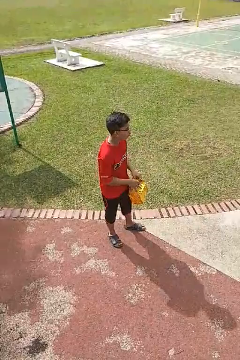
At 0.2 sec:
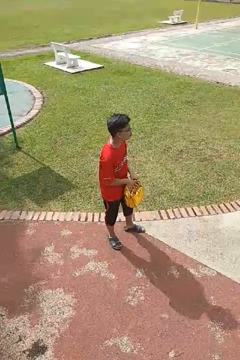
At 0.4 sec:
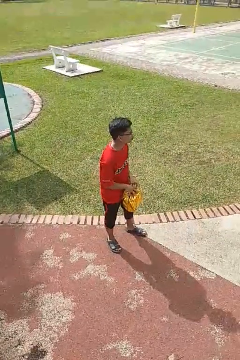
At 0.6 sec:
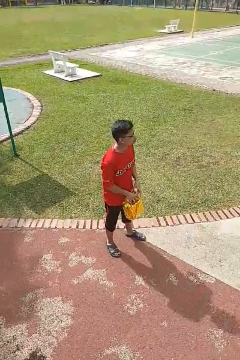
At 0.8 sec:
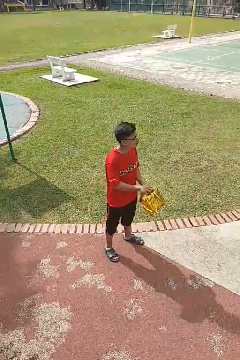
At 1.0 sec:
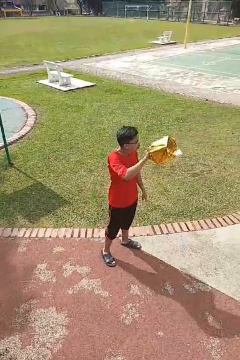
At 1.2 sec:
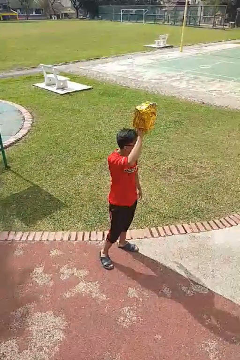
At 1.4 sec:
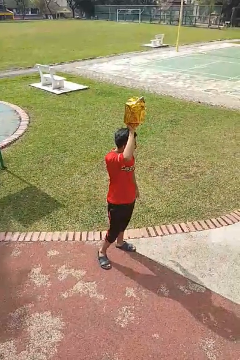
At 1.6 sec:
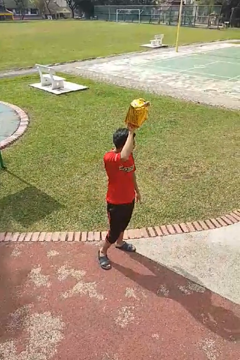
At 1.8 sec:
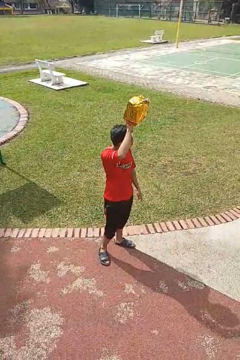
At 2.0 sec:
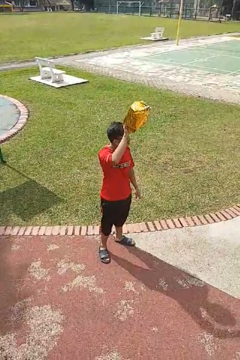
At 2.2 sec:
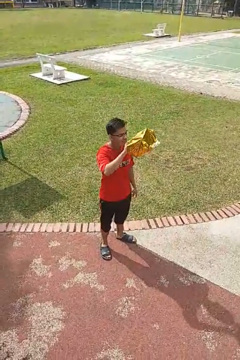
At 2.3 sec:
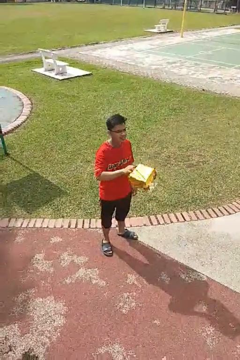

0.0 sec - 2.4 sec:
person holds object above head

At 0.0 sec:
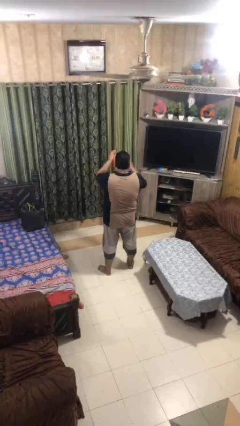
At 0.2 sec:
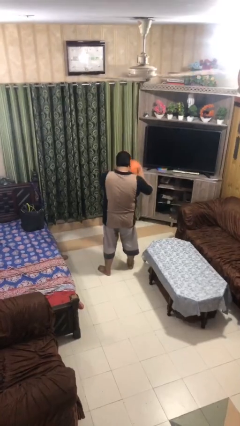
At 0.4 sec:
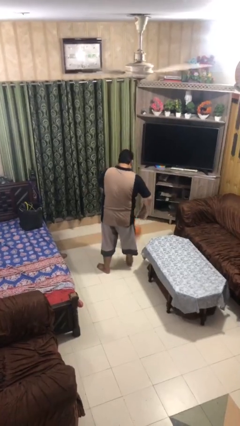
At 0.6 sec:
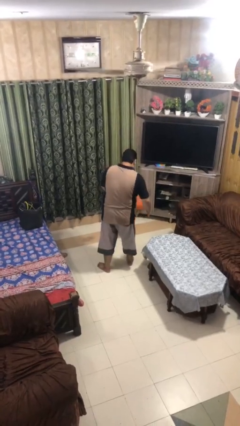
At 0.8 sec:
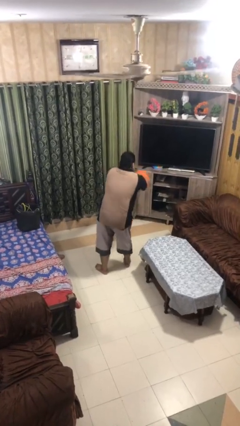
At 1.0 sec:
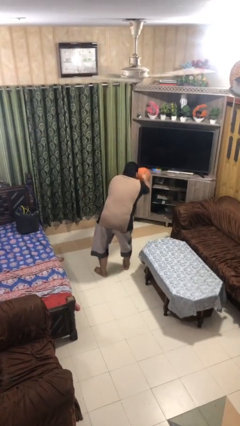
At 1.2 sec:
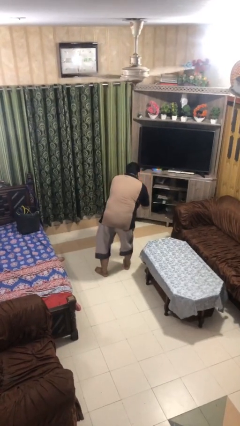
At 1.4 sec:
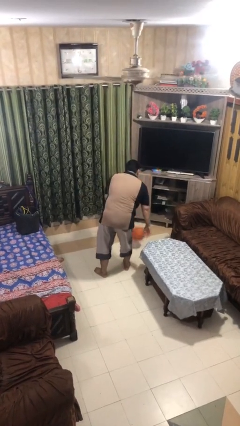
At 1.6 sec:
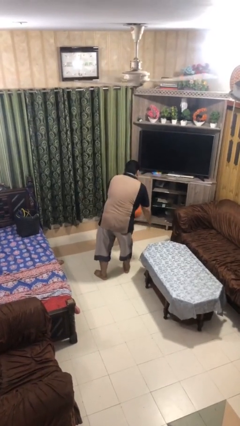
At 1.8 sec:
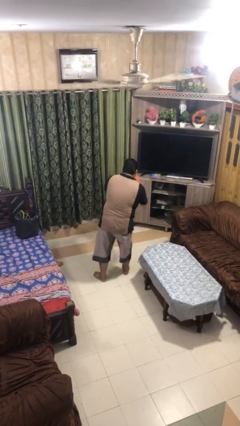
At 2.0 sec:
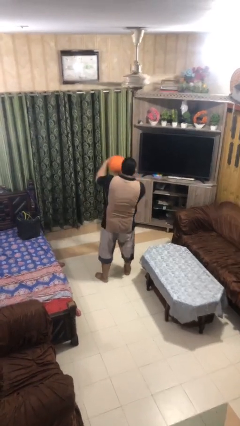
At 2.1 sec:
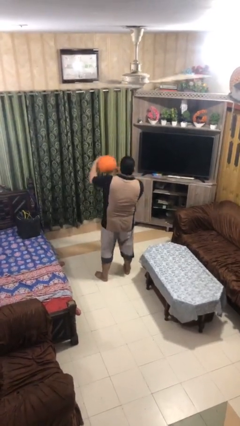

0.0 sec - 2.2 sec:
person bounces ball on floor

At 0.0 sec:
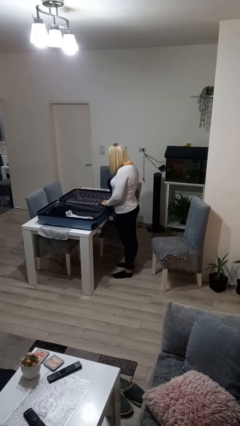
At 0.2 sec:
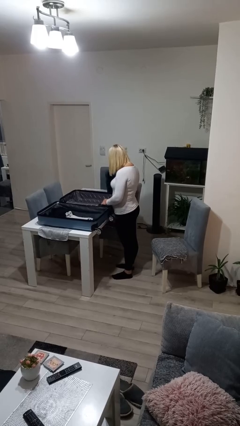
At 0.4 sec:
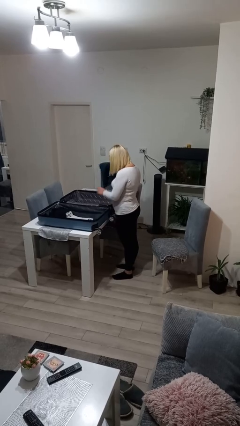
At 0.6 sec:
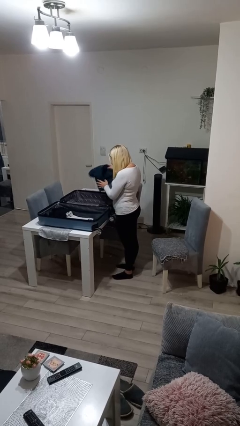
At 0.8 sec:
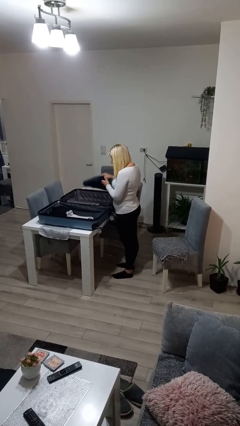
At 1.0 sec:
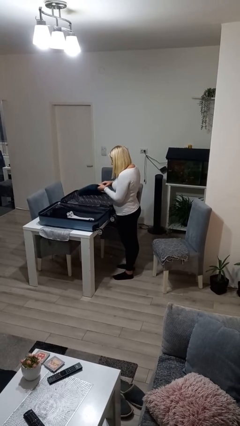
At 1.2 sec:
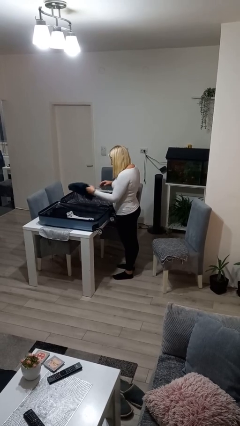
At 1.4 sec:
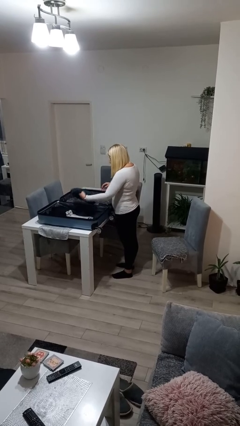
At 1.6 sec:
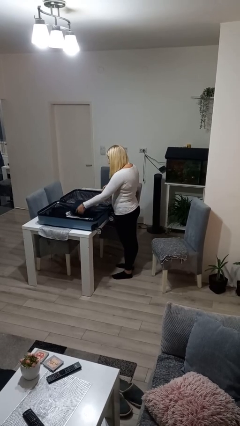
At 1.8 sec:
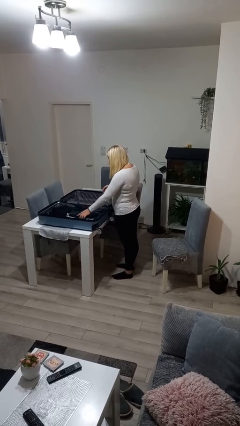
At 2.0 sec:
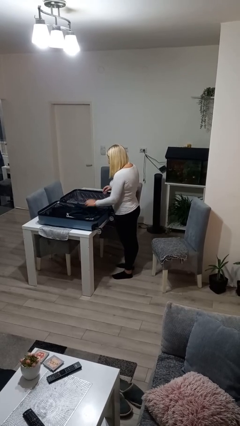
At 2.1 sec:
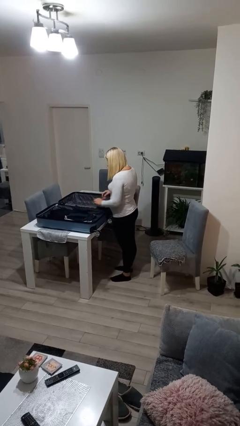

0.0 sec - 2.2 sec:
person loads clothes into suitcase

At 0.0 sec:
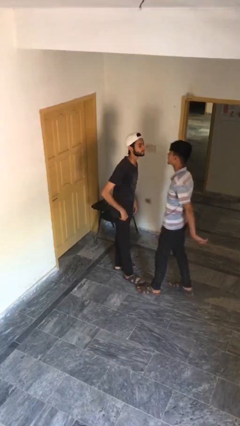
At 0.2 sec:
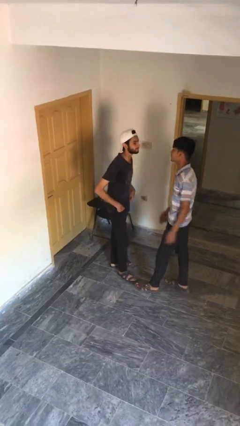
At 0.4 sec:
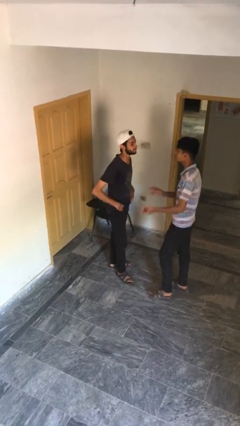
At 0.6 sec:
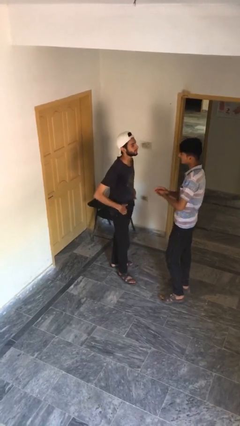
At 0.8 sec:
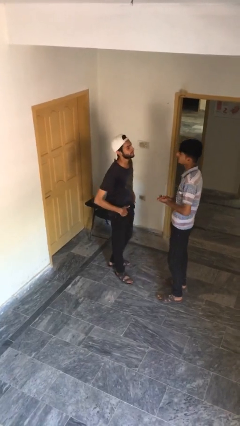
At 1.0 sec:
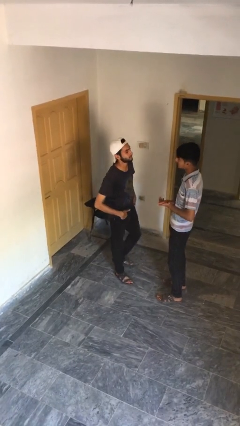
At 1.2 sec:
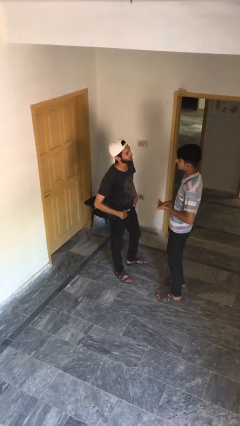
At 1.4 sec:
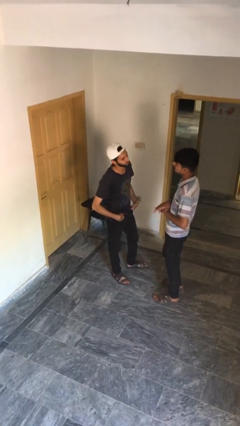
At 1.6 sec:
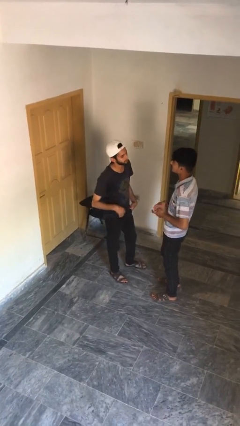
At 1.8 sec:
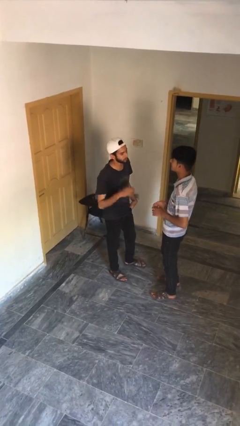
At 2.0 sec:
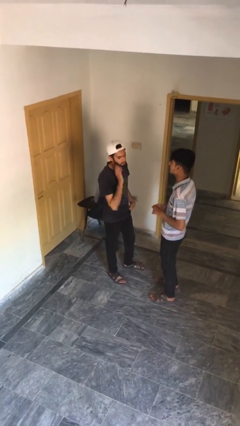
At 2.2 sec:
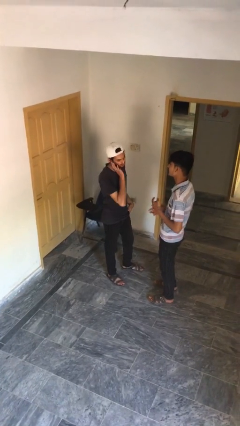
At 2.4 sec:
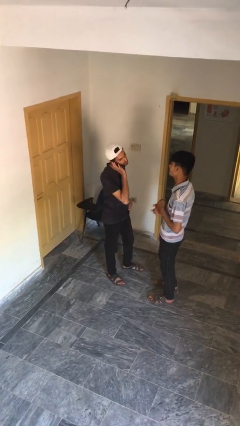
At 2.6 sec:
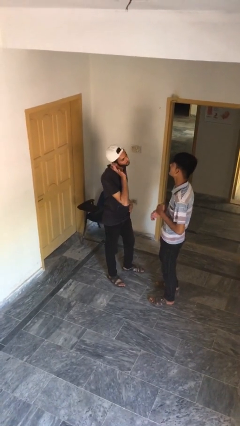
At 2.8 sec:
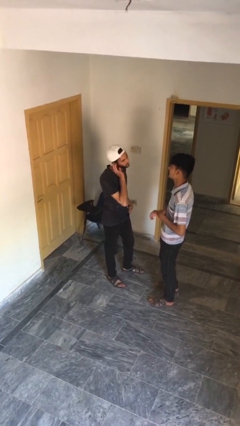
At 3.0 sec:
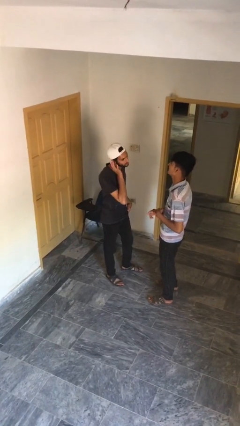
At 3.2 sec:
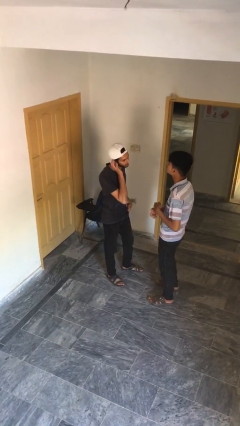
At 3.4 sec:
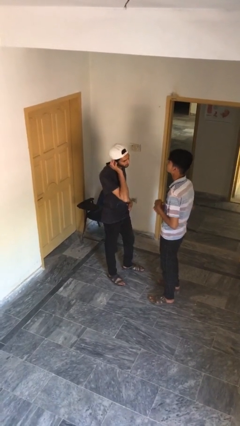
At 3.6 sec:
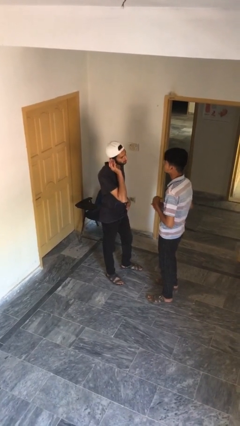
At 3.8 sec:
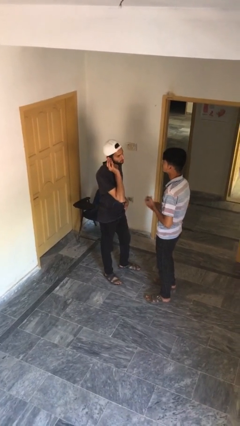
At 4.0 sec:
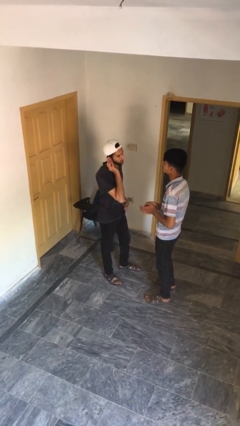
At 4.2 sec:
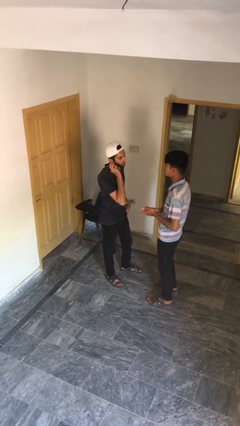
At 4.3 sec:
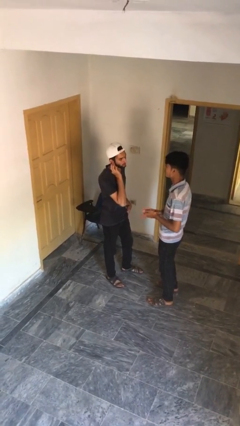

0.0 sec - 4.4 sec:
person talks to person

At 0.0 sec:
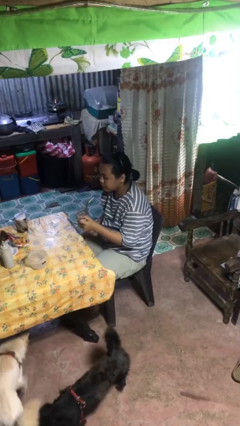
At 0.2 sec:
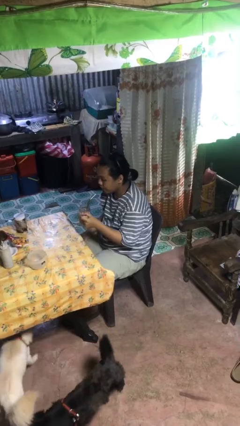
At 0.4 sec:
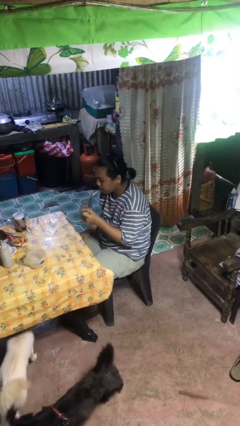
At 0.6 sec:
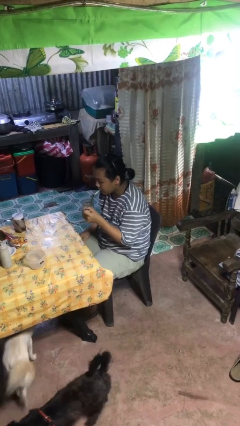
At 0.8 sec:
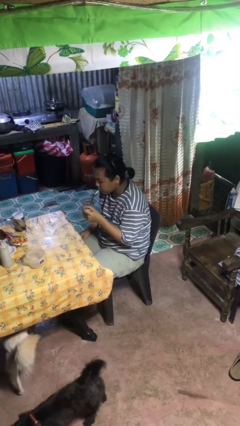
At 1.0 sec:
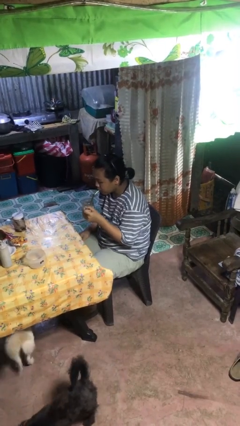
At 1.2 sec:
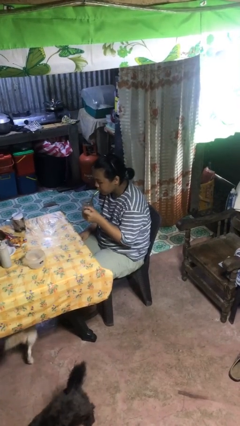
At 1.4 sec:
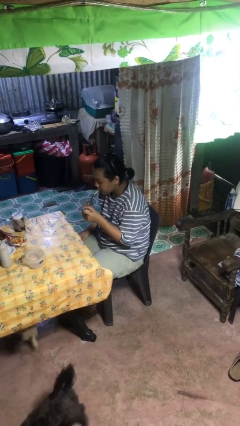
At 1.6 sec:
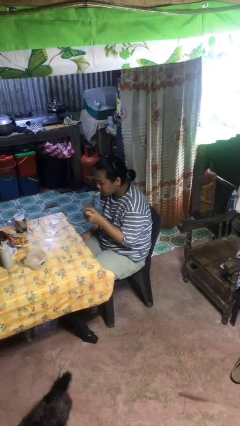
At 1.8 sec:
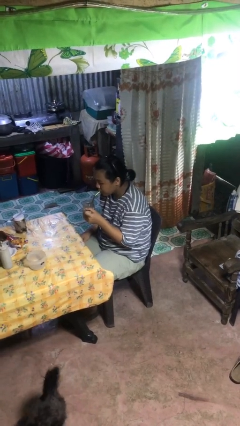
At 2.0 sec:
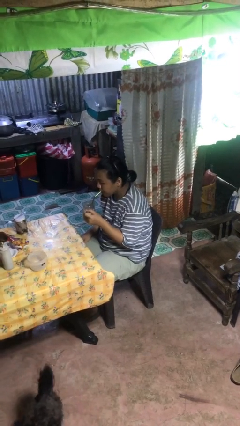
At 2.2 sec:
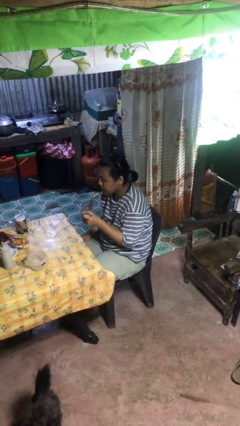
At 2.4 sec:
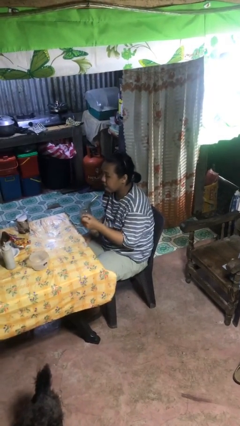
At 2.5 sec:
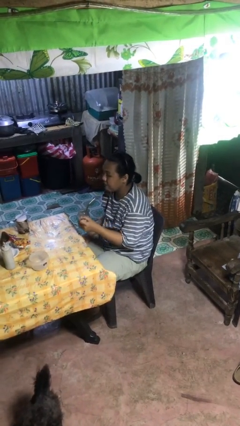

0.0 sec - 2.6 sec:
person drinks from straw

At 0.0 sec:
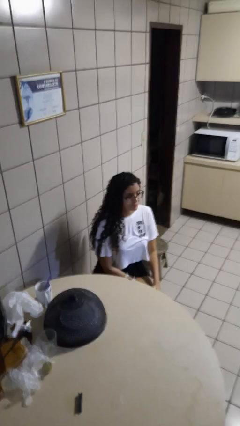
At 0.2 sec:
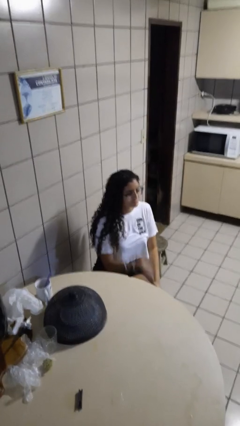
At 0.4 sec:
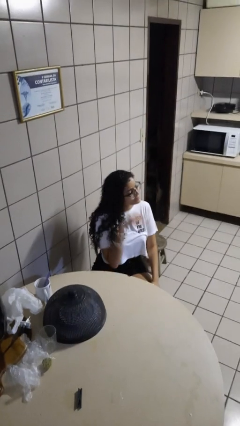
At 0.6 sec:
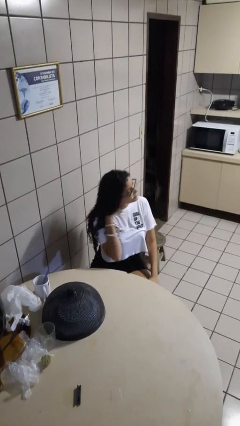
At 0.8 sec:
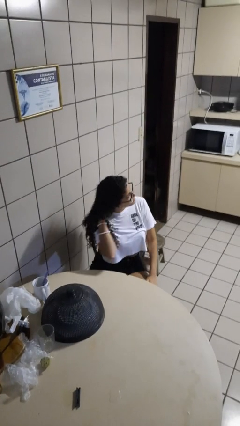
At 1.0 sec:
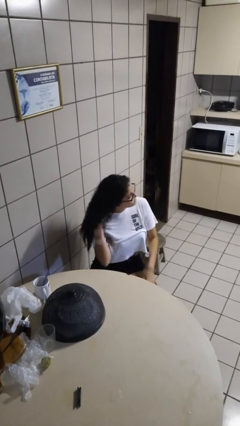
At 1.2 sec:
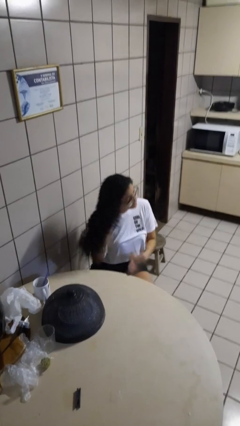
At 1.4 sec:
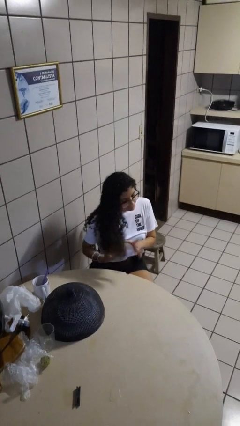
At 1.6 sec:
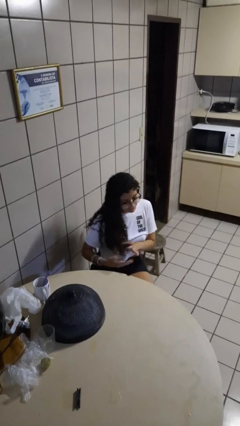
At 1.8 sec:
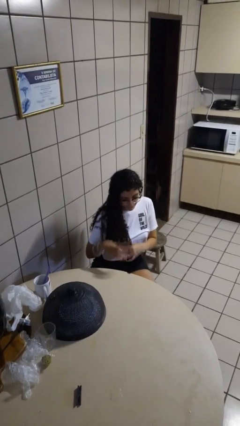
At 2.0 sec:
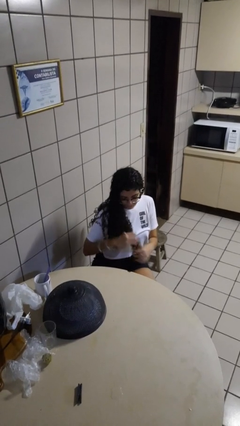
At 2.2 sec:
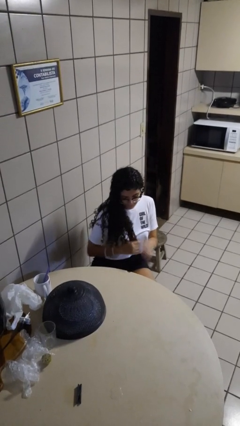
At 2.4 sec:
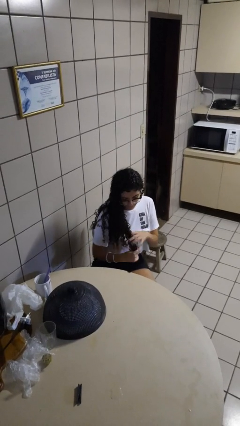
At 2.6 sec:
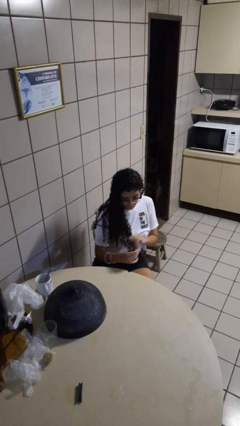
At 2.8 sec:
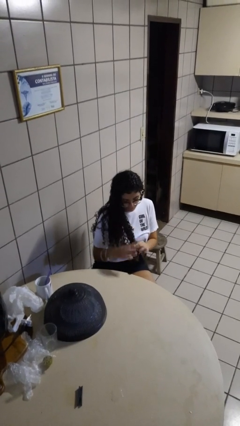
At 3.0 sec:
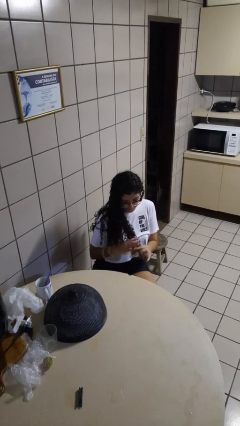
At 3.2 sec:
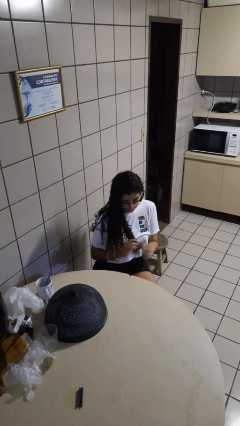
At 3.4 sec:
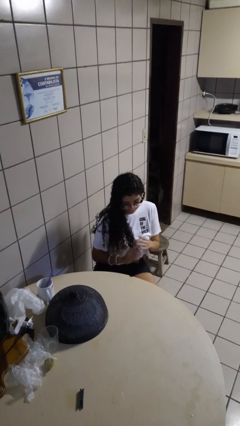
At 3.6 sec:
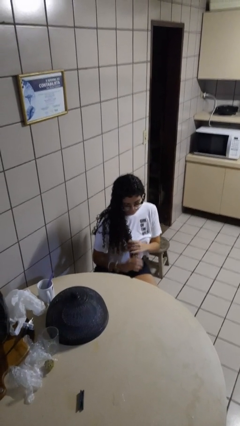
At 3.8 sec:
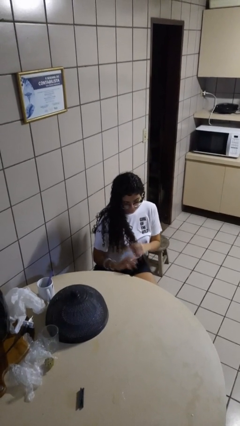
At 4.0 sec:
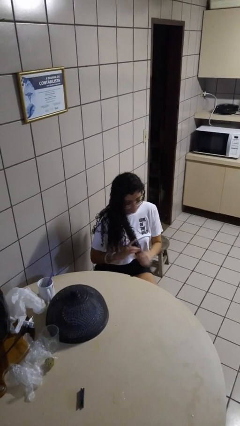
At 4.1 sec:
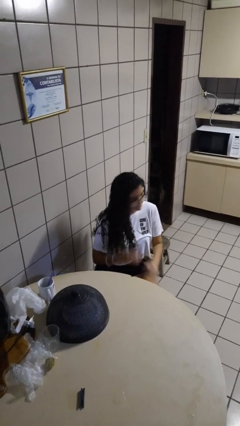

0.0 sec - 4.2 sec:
person strokes hair
